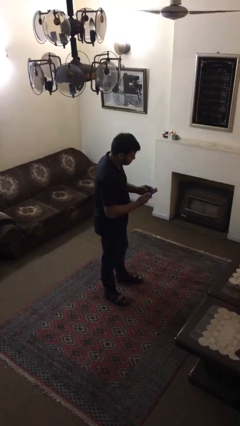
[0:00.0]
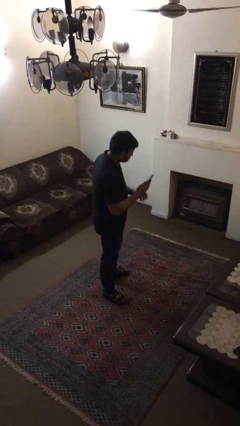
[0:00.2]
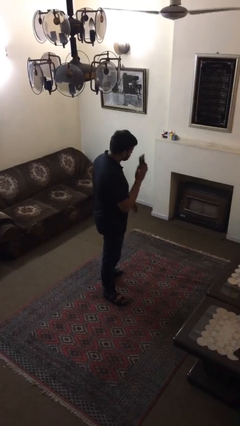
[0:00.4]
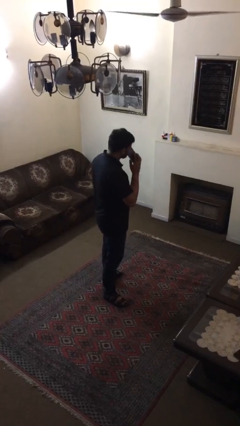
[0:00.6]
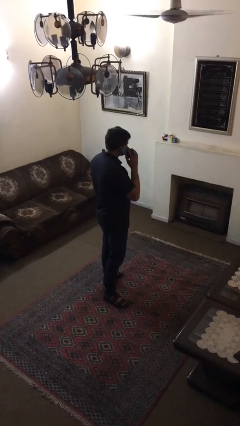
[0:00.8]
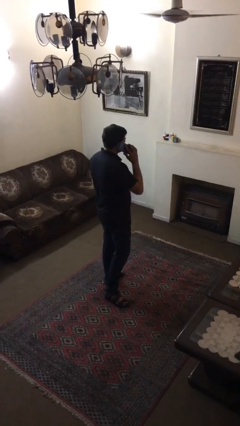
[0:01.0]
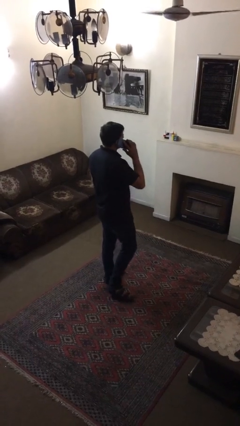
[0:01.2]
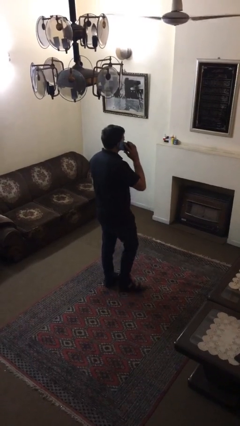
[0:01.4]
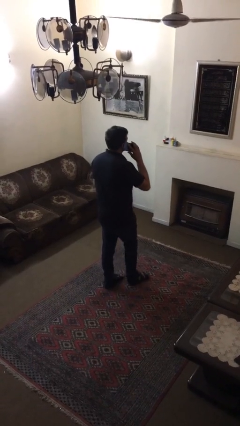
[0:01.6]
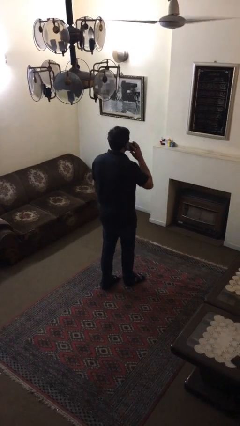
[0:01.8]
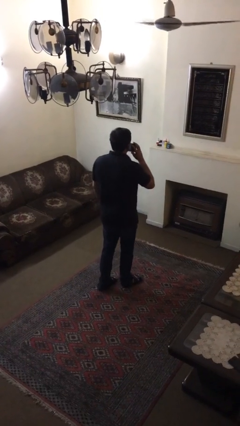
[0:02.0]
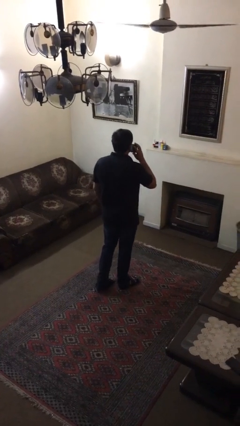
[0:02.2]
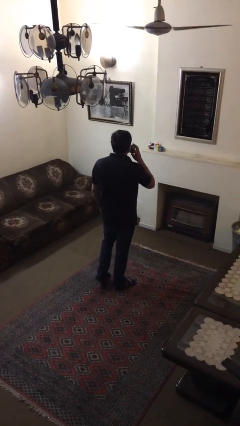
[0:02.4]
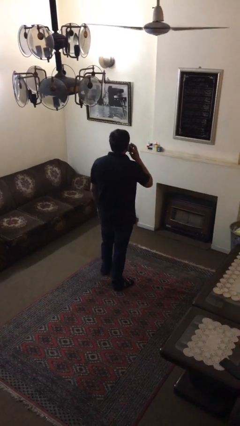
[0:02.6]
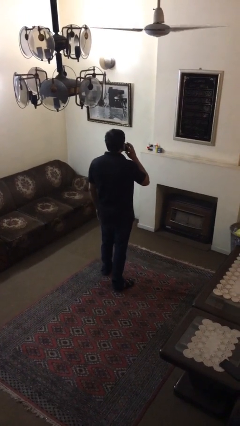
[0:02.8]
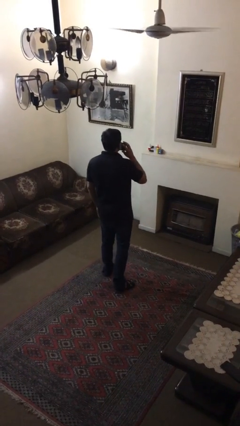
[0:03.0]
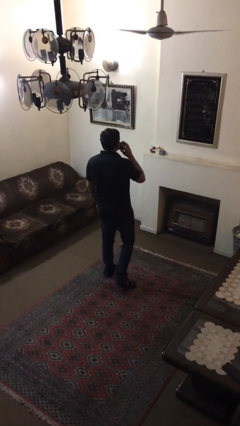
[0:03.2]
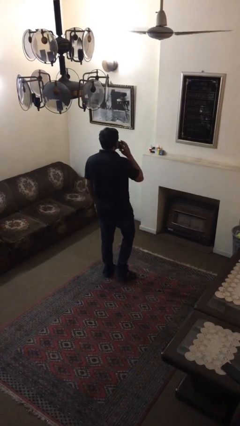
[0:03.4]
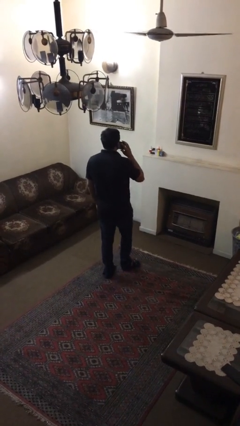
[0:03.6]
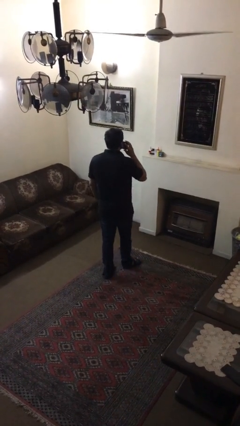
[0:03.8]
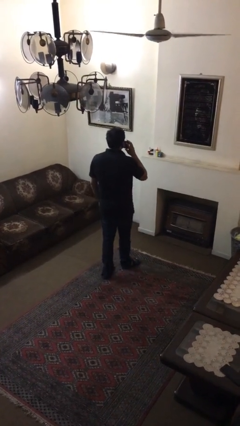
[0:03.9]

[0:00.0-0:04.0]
person talks on phone

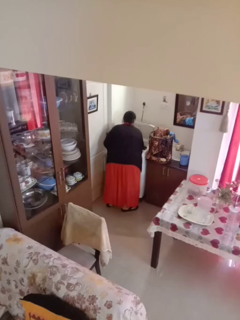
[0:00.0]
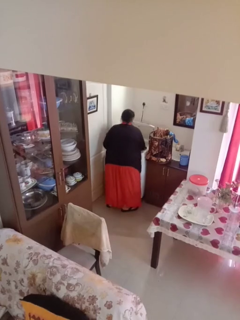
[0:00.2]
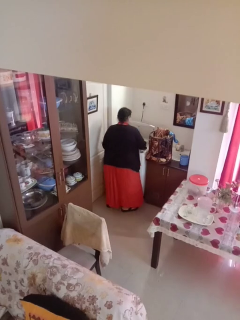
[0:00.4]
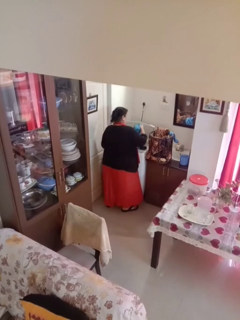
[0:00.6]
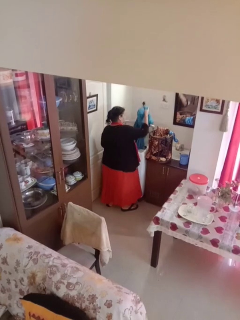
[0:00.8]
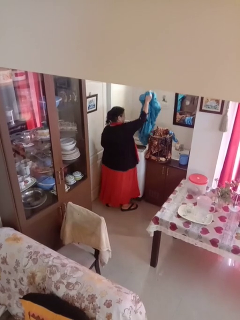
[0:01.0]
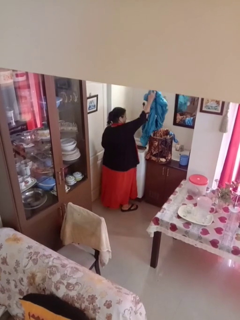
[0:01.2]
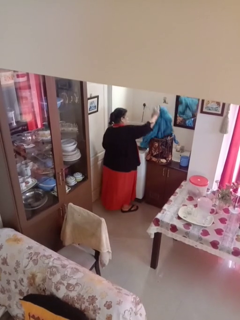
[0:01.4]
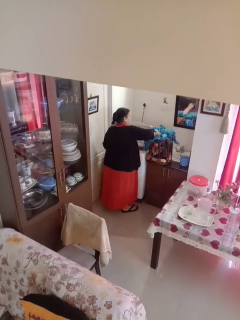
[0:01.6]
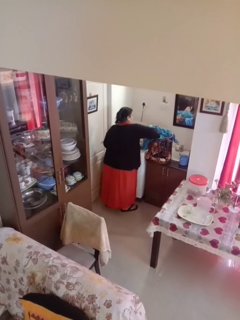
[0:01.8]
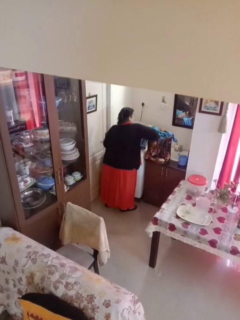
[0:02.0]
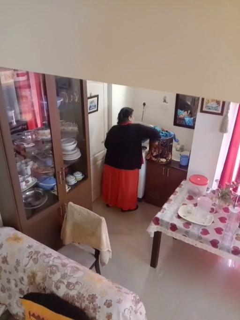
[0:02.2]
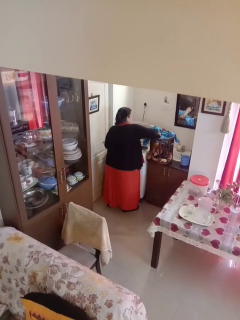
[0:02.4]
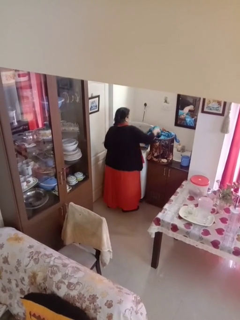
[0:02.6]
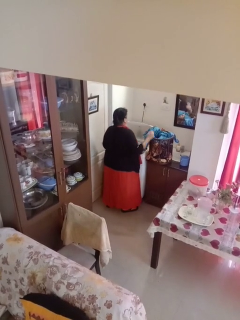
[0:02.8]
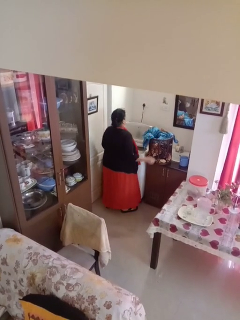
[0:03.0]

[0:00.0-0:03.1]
person loads clotheswasher

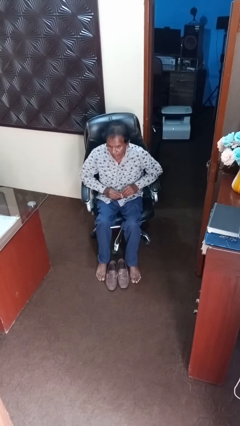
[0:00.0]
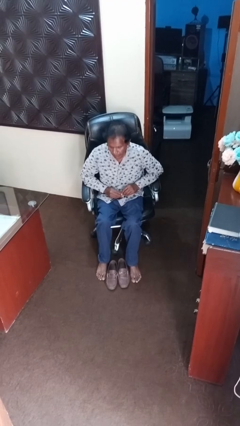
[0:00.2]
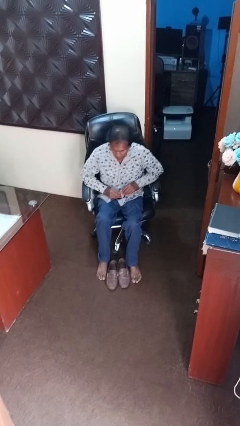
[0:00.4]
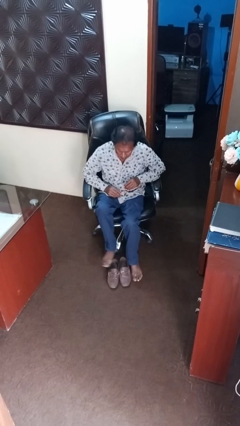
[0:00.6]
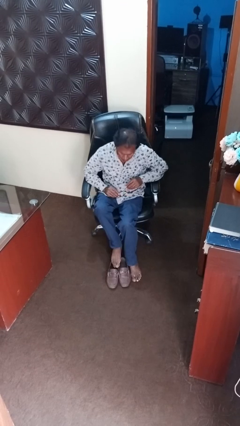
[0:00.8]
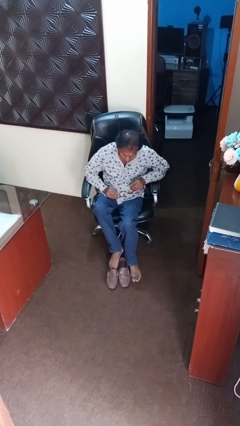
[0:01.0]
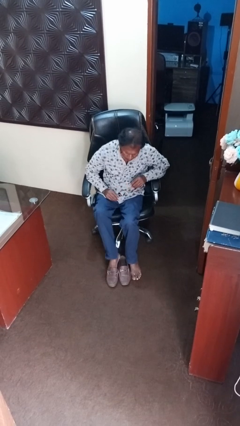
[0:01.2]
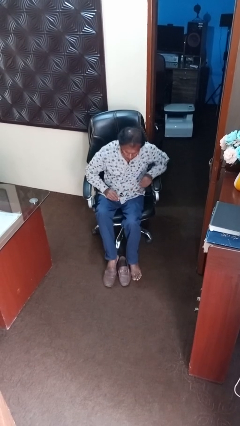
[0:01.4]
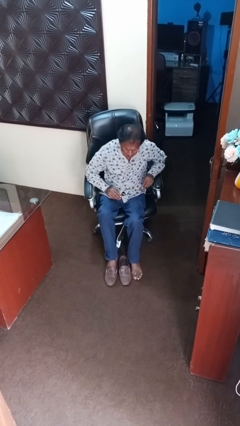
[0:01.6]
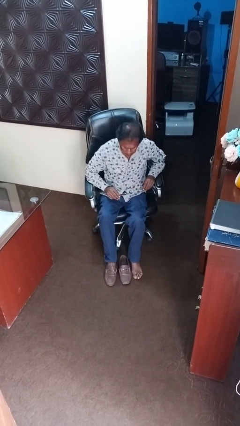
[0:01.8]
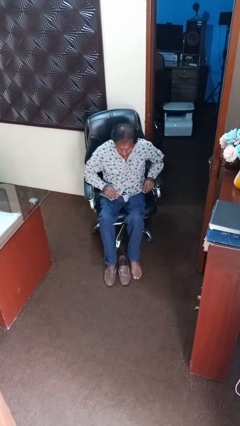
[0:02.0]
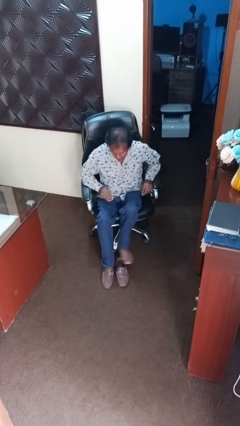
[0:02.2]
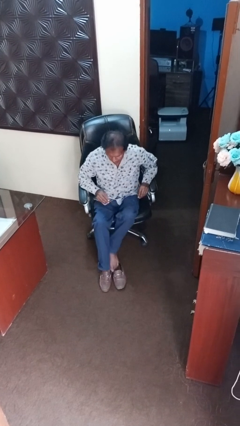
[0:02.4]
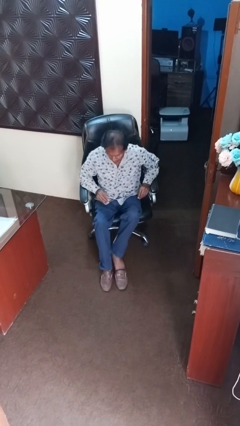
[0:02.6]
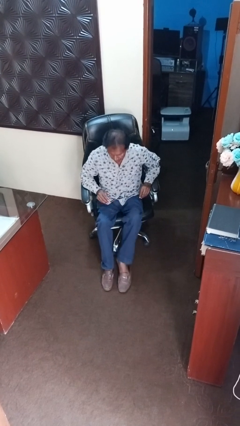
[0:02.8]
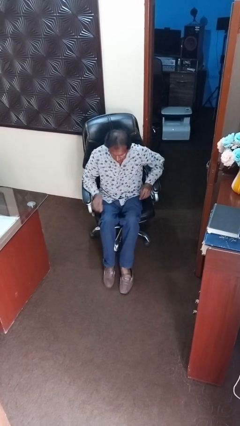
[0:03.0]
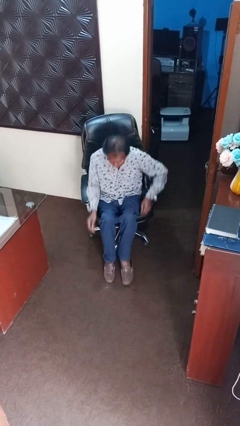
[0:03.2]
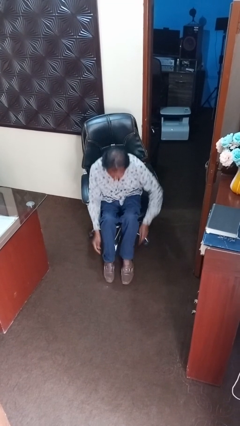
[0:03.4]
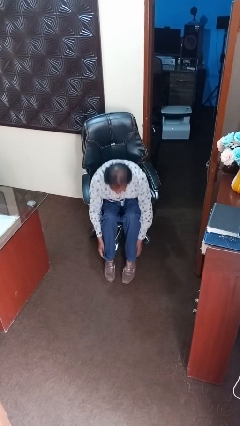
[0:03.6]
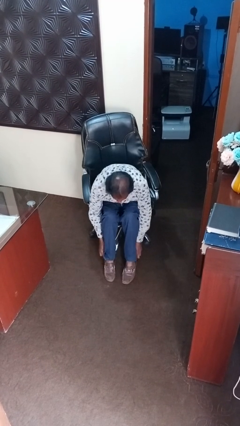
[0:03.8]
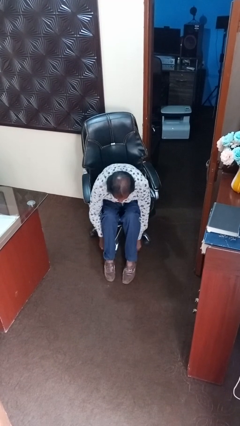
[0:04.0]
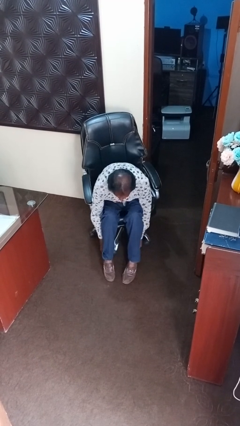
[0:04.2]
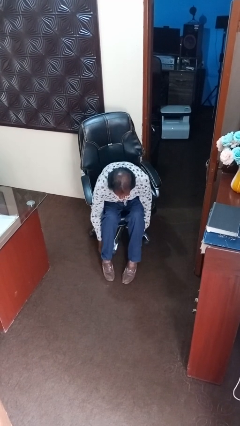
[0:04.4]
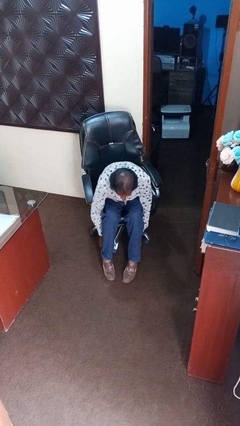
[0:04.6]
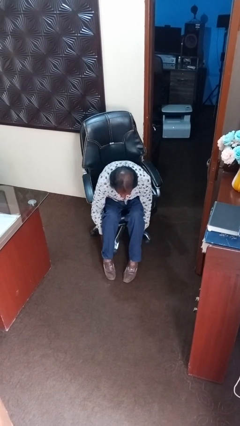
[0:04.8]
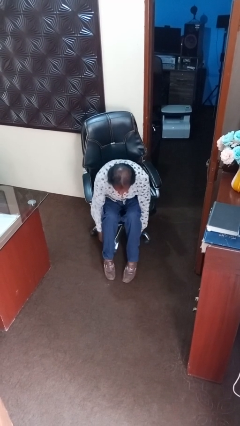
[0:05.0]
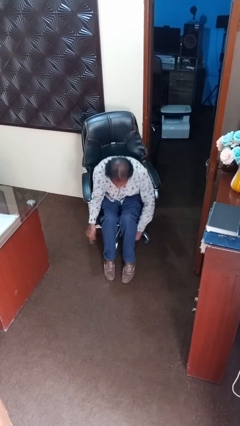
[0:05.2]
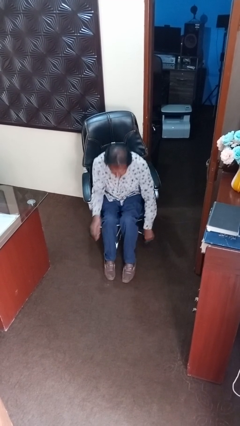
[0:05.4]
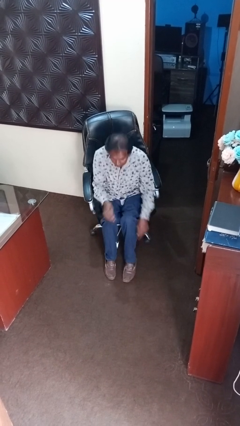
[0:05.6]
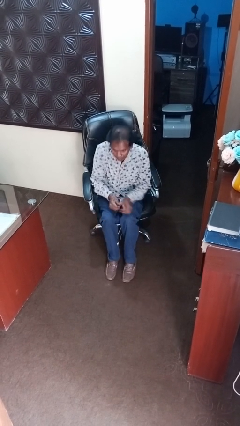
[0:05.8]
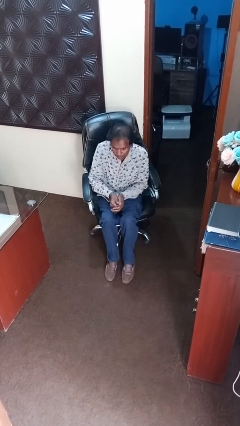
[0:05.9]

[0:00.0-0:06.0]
person puts on shoes

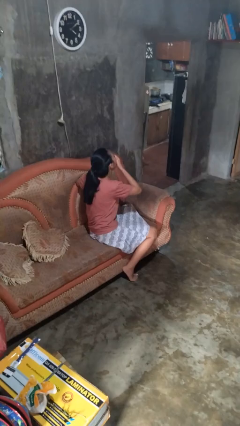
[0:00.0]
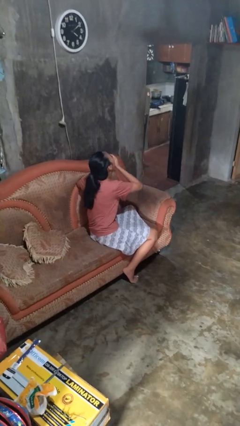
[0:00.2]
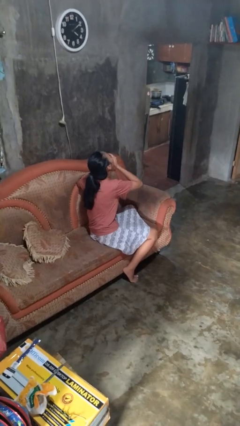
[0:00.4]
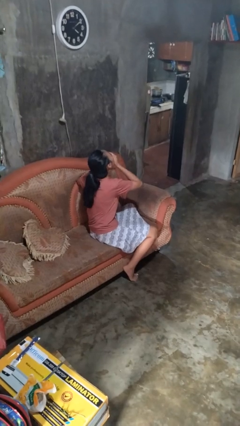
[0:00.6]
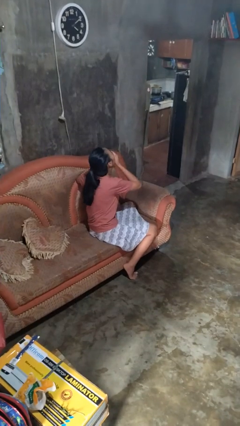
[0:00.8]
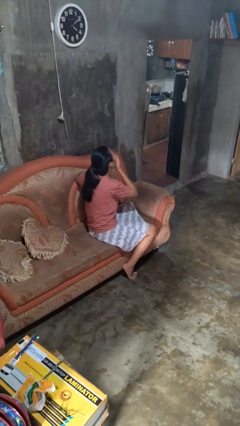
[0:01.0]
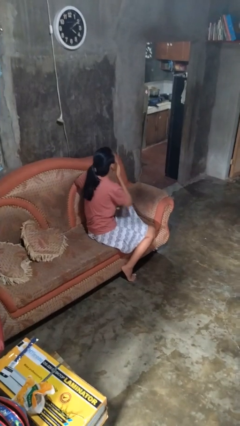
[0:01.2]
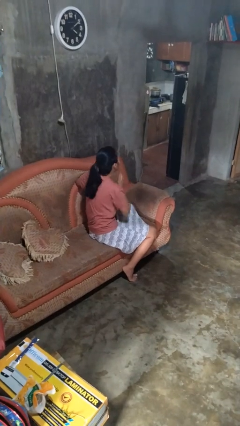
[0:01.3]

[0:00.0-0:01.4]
person yawns

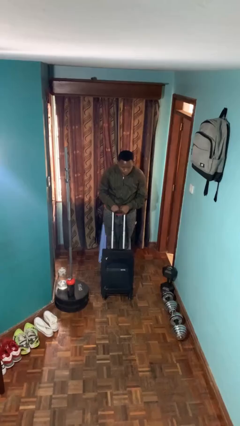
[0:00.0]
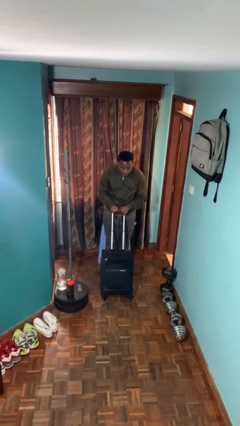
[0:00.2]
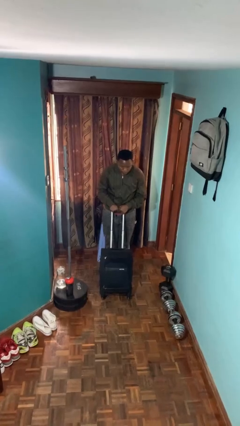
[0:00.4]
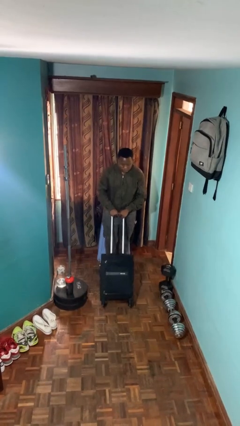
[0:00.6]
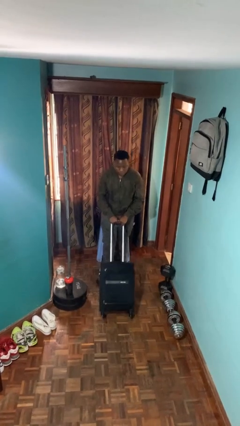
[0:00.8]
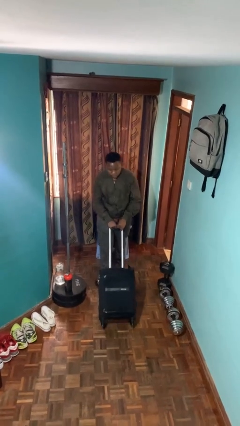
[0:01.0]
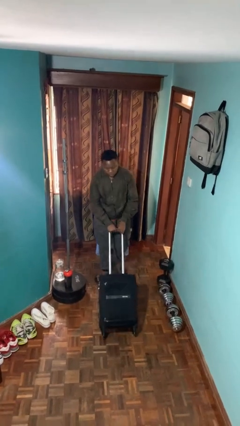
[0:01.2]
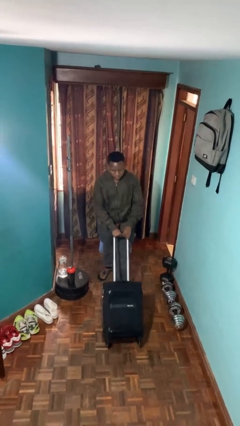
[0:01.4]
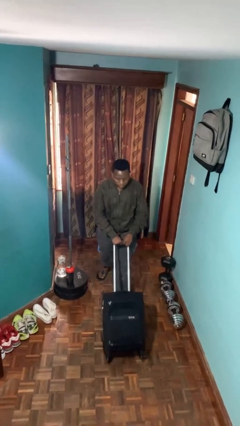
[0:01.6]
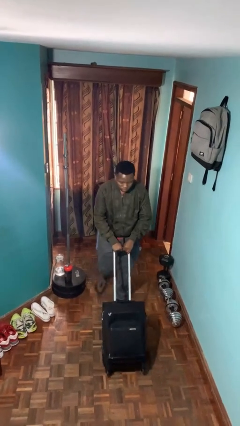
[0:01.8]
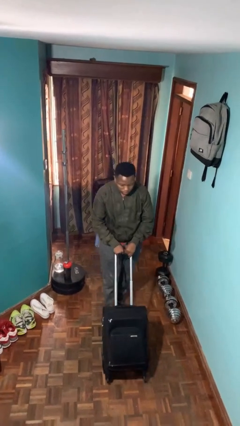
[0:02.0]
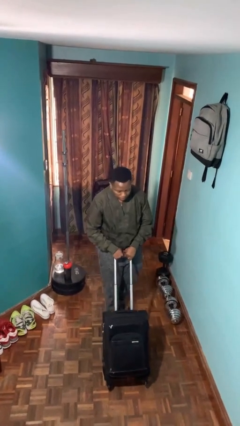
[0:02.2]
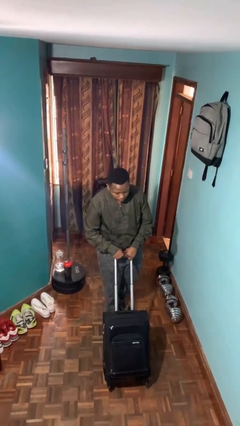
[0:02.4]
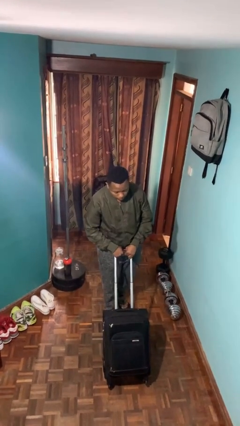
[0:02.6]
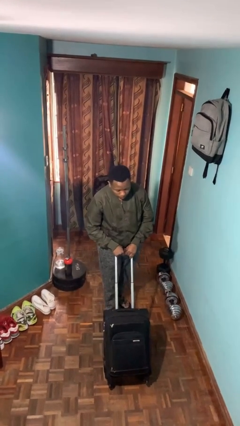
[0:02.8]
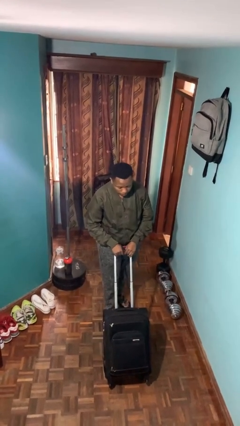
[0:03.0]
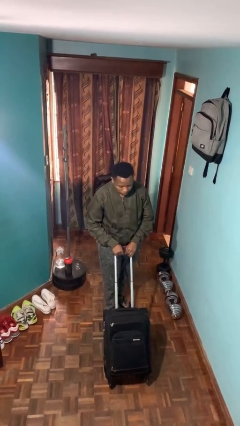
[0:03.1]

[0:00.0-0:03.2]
person pushes wheeled cart

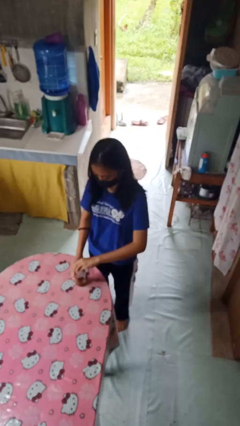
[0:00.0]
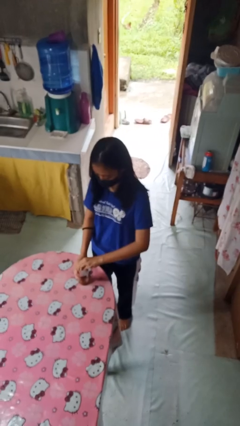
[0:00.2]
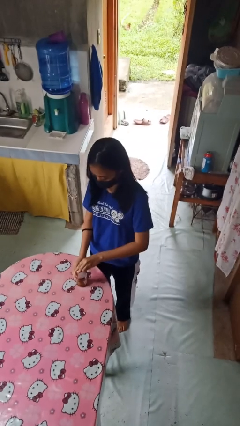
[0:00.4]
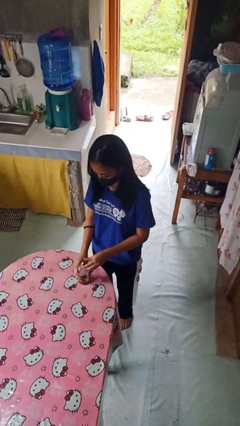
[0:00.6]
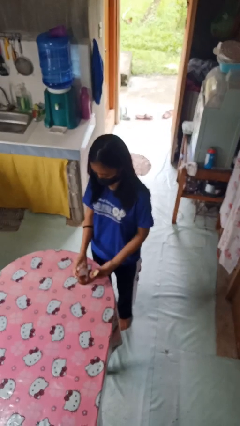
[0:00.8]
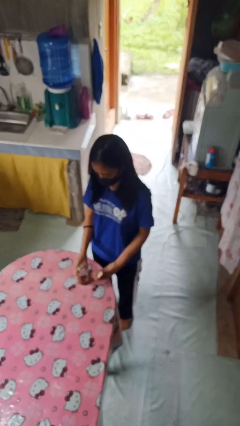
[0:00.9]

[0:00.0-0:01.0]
person opens jar
